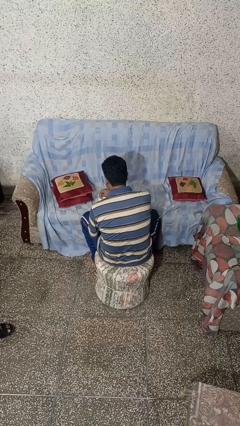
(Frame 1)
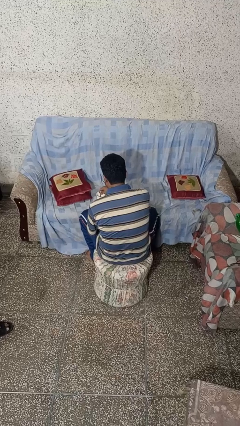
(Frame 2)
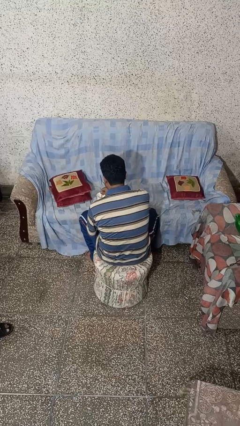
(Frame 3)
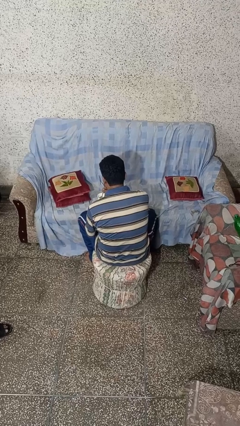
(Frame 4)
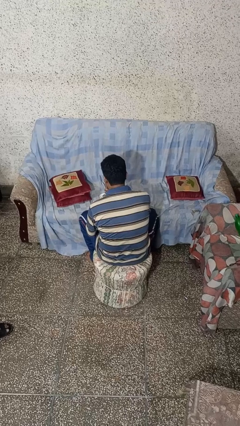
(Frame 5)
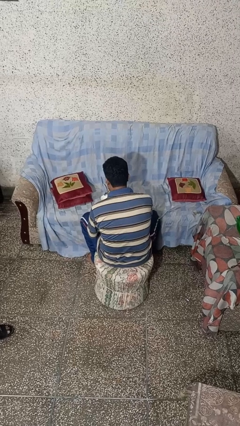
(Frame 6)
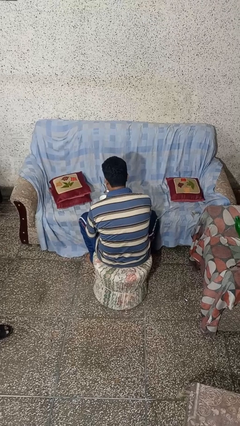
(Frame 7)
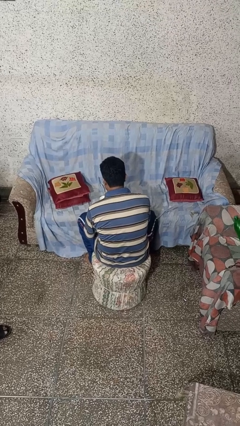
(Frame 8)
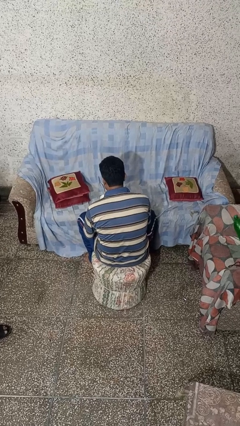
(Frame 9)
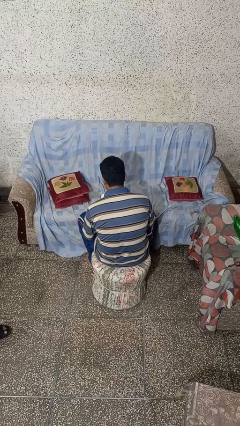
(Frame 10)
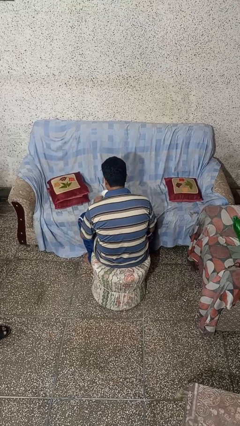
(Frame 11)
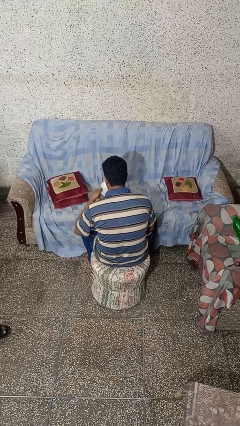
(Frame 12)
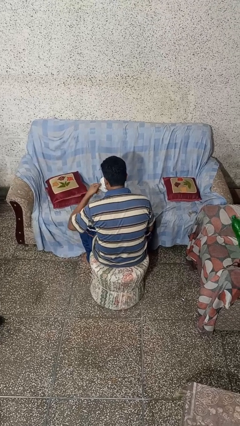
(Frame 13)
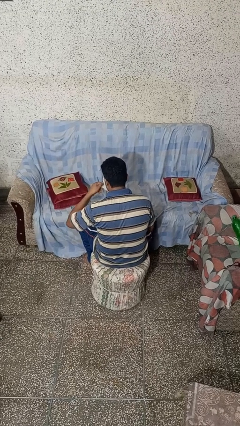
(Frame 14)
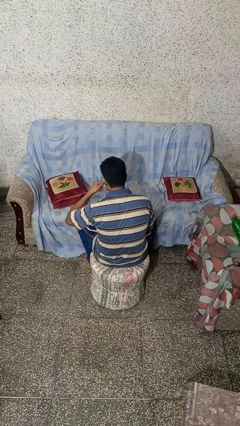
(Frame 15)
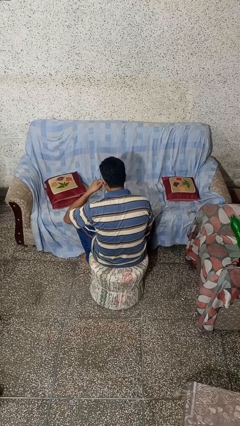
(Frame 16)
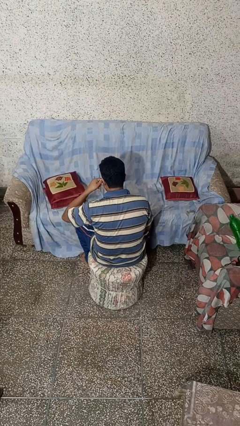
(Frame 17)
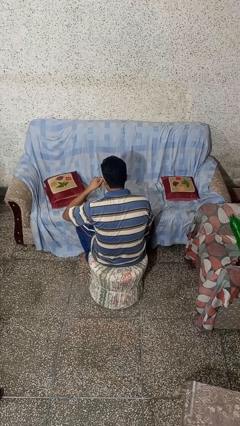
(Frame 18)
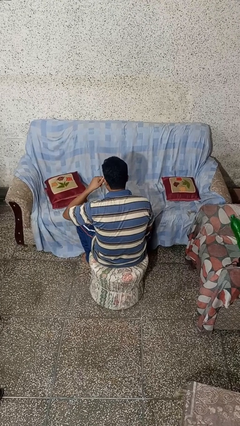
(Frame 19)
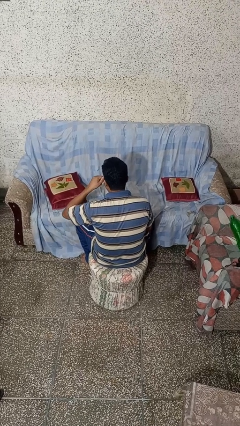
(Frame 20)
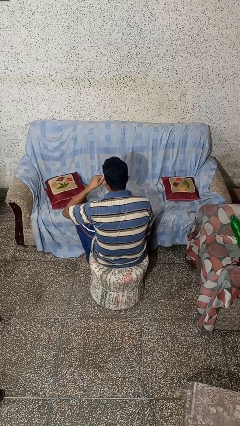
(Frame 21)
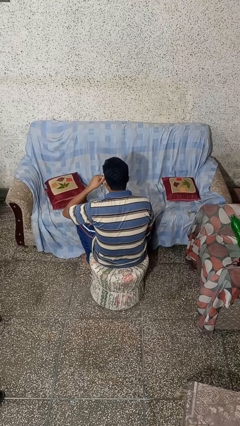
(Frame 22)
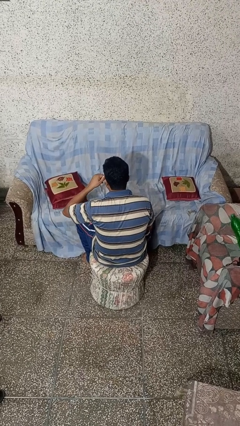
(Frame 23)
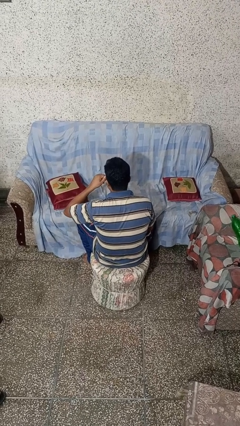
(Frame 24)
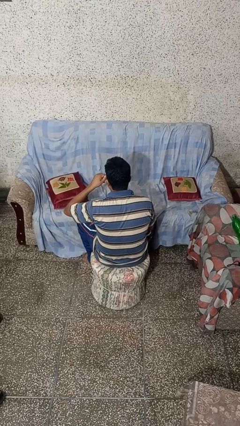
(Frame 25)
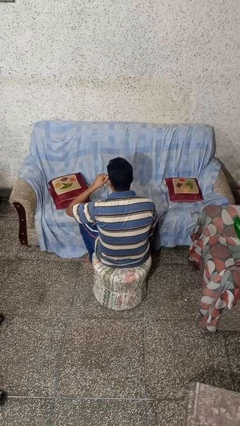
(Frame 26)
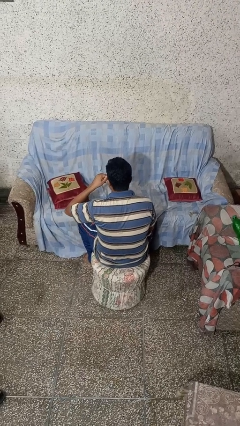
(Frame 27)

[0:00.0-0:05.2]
person drinks from mug

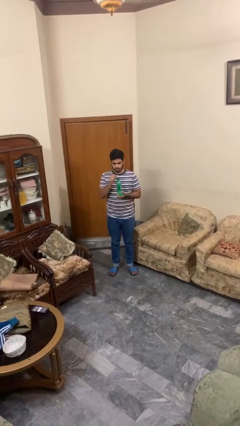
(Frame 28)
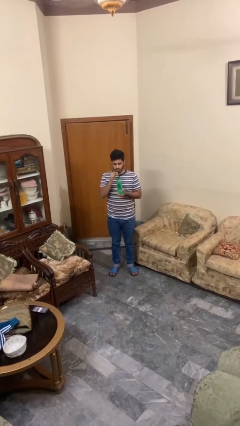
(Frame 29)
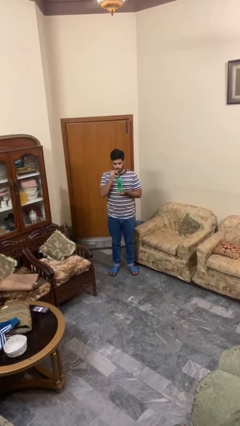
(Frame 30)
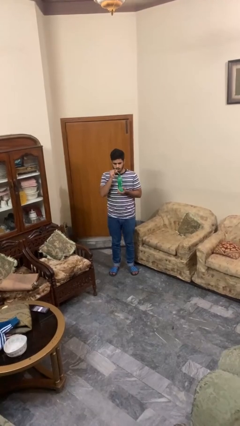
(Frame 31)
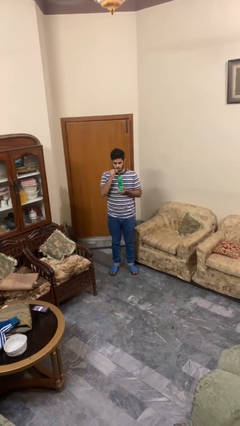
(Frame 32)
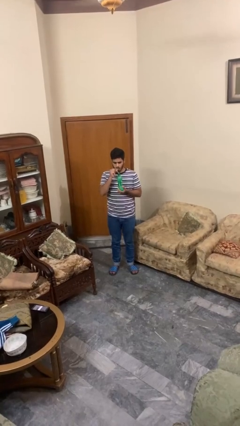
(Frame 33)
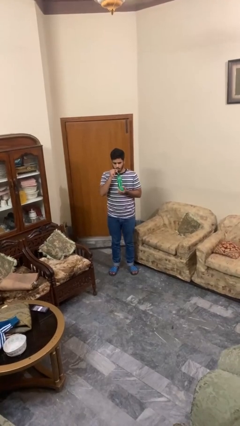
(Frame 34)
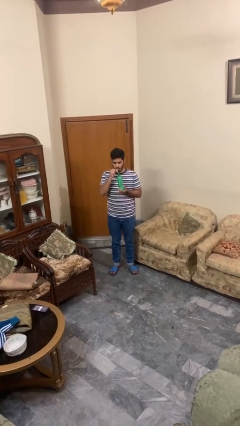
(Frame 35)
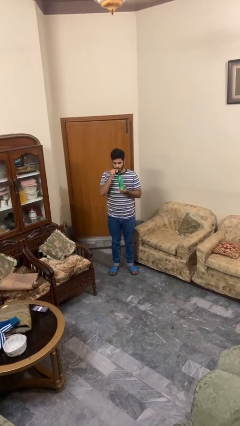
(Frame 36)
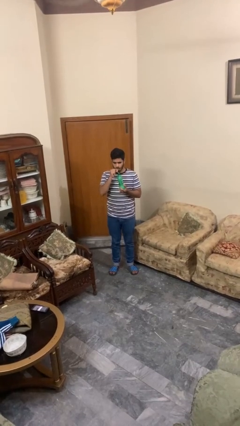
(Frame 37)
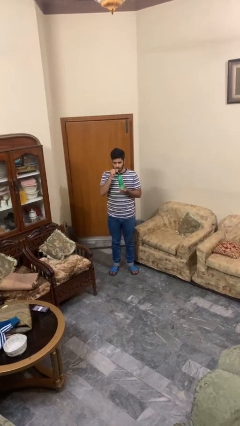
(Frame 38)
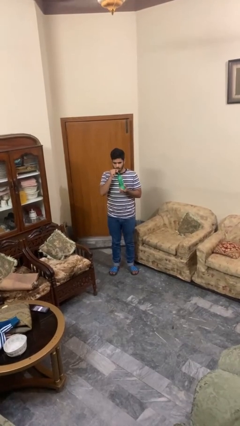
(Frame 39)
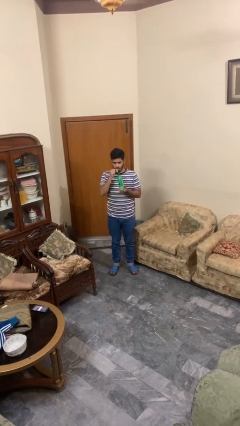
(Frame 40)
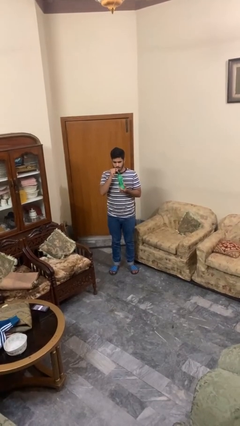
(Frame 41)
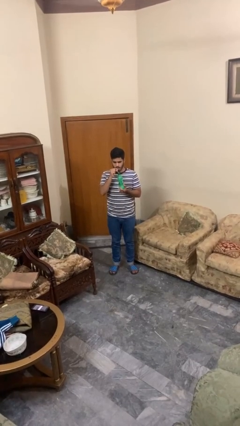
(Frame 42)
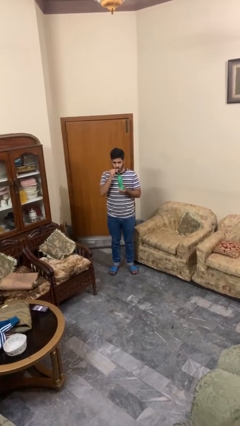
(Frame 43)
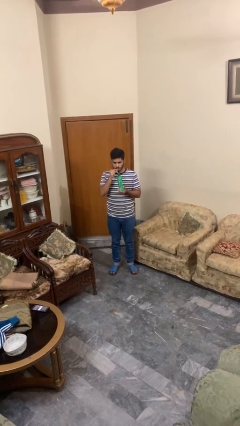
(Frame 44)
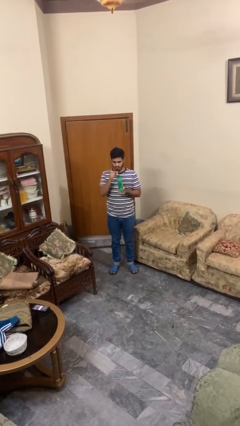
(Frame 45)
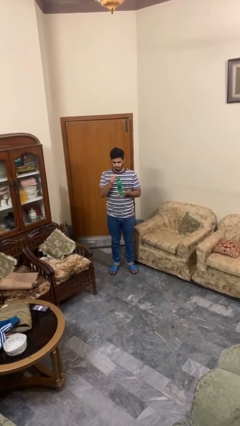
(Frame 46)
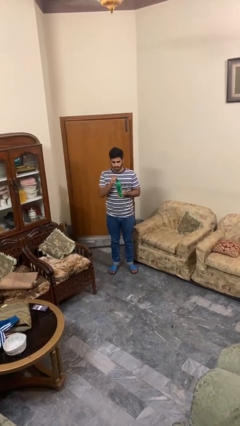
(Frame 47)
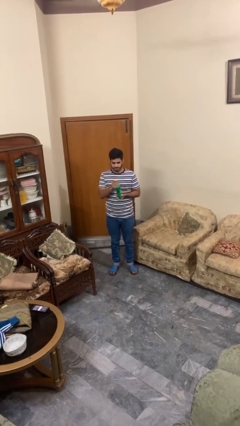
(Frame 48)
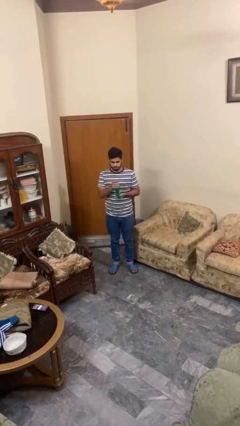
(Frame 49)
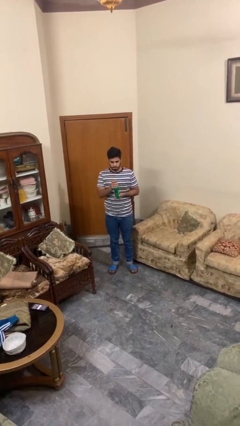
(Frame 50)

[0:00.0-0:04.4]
person drinks from straw

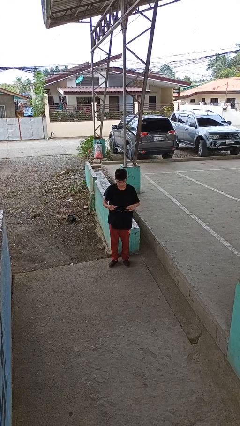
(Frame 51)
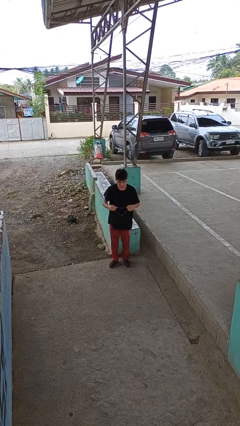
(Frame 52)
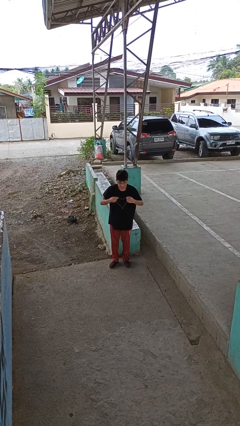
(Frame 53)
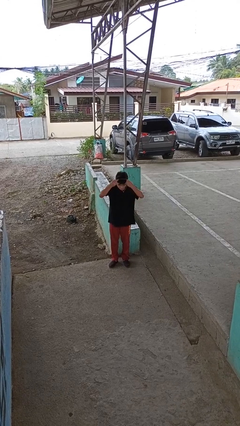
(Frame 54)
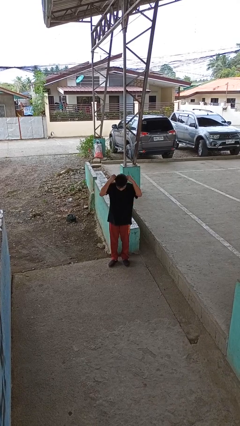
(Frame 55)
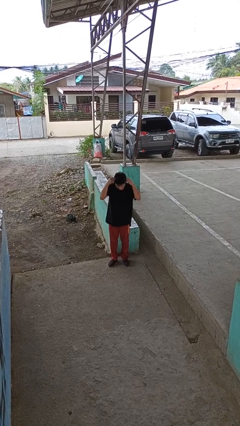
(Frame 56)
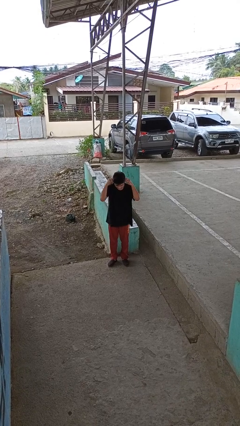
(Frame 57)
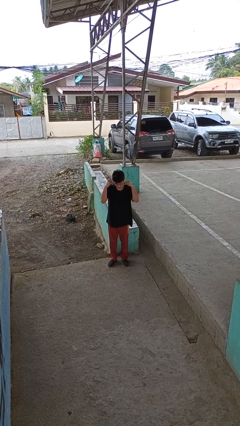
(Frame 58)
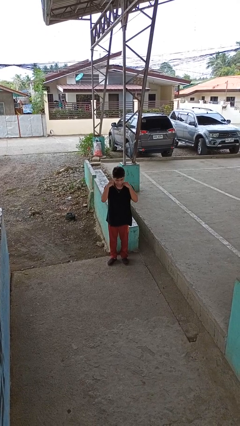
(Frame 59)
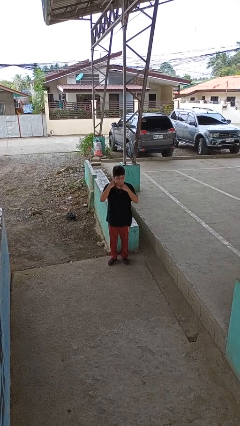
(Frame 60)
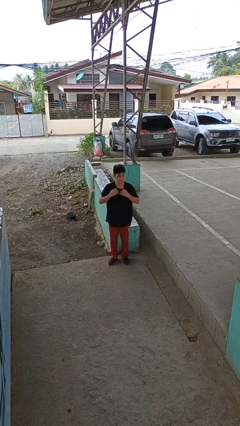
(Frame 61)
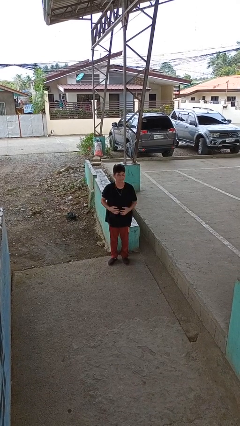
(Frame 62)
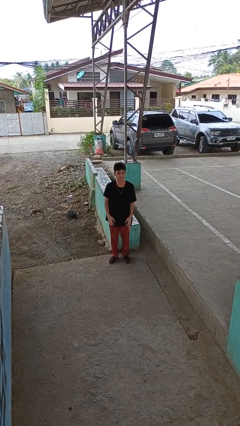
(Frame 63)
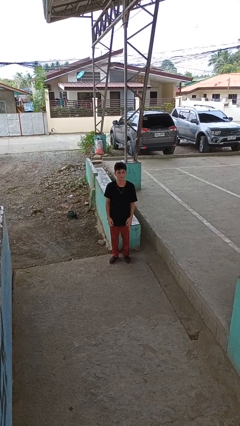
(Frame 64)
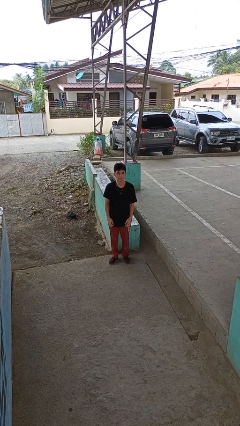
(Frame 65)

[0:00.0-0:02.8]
person puts on necklace

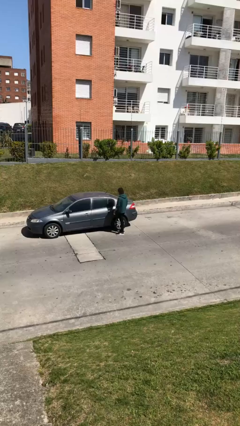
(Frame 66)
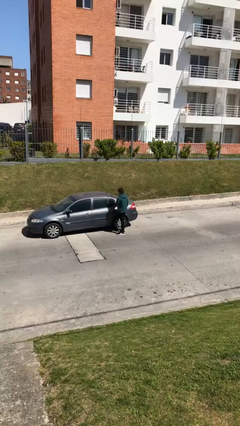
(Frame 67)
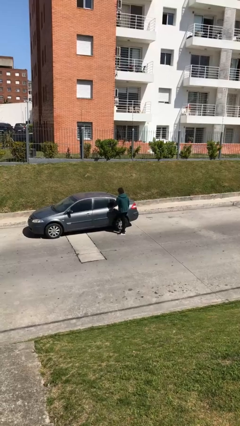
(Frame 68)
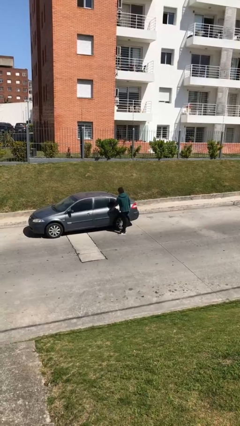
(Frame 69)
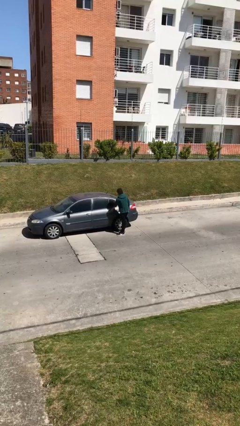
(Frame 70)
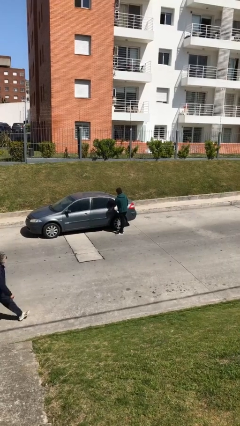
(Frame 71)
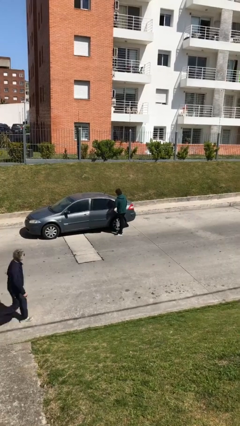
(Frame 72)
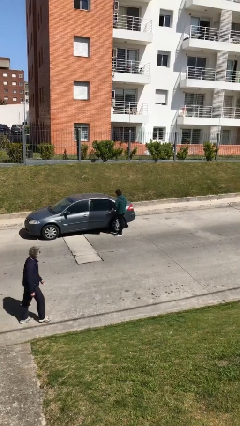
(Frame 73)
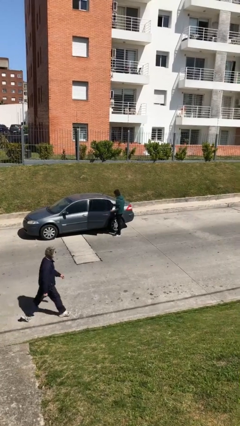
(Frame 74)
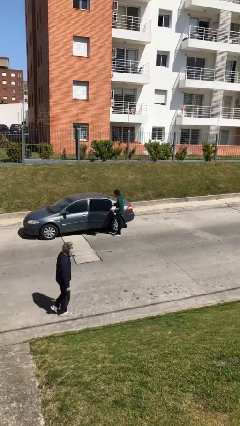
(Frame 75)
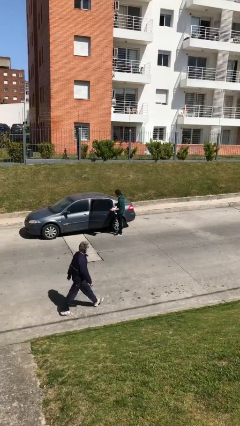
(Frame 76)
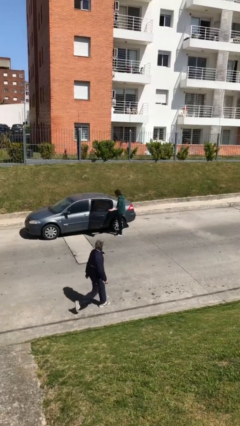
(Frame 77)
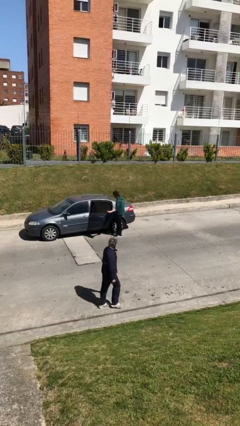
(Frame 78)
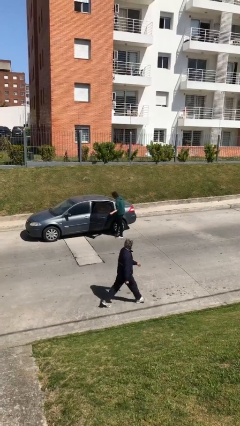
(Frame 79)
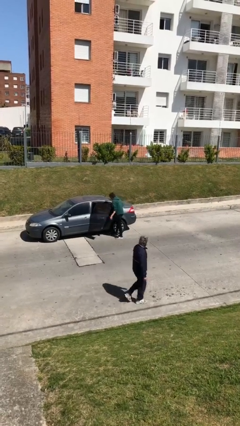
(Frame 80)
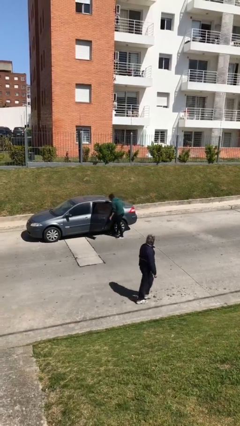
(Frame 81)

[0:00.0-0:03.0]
person opens car door

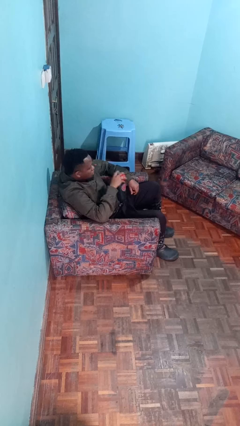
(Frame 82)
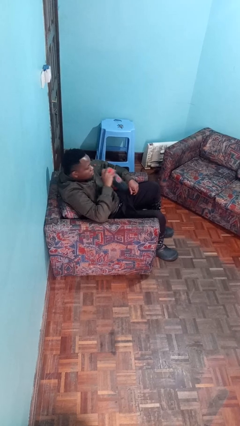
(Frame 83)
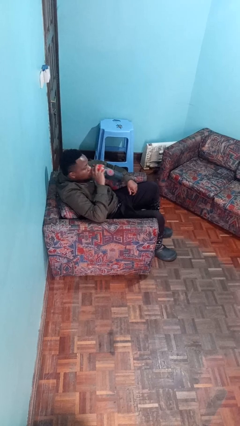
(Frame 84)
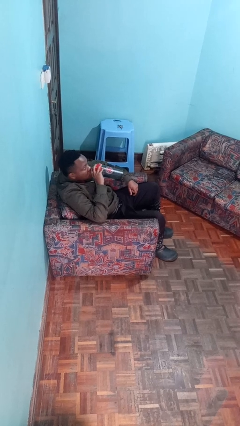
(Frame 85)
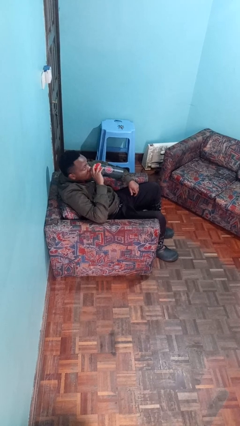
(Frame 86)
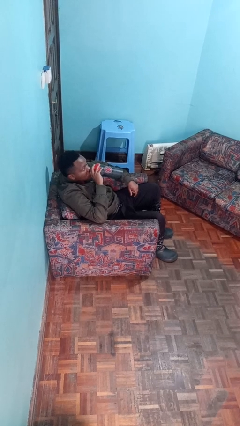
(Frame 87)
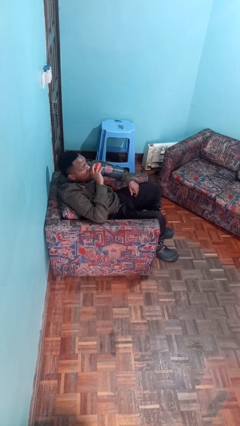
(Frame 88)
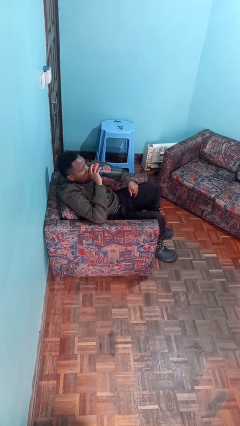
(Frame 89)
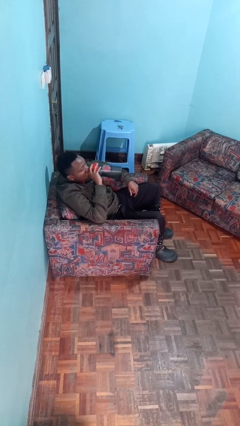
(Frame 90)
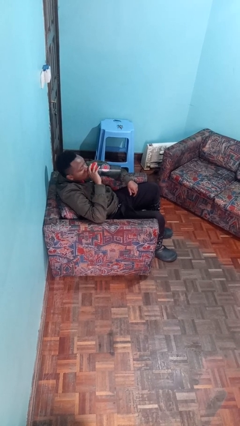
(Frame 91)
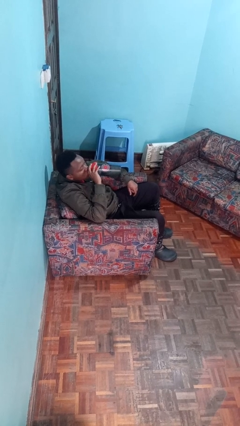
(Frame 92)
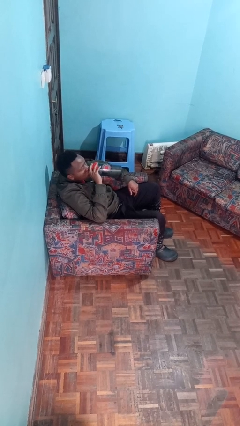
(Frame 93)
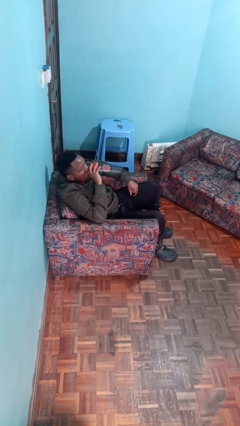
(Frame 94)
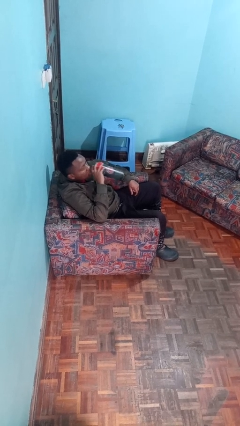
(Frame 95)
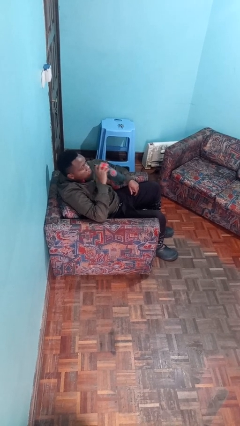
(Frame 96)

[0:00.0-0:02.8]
person drinks from bottle
